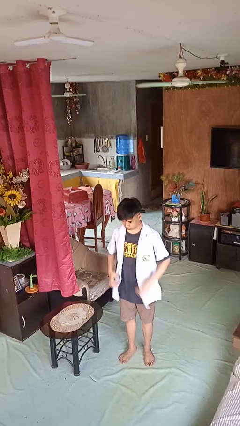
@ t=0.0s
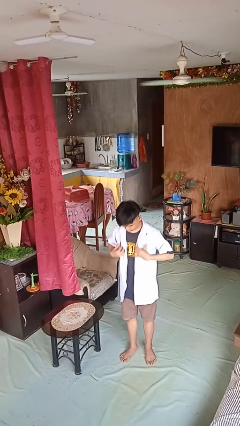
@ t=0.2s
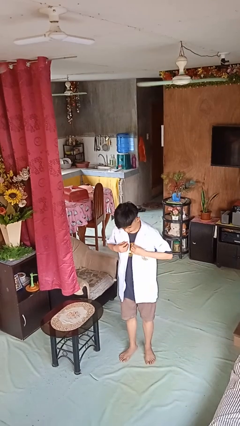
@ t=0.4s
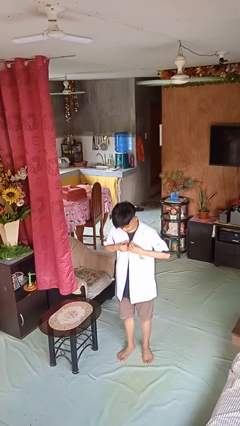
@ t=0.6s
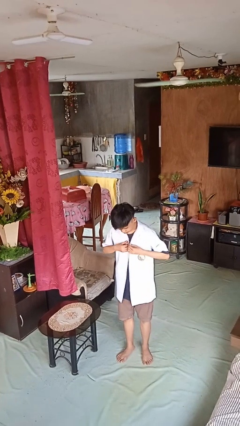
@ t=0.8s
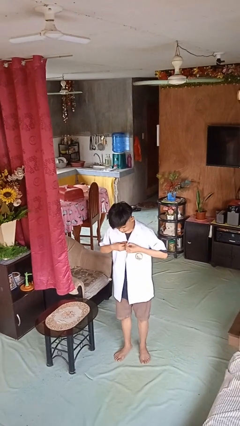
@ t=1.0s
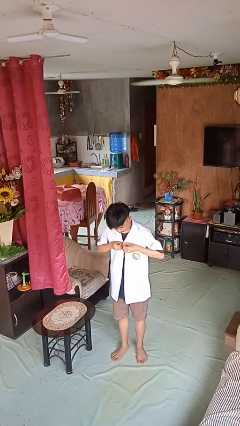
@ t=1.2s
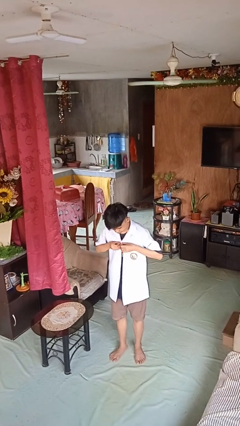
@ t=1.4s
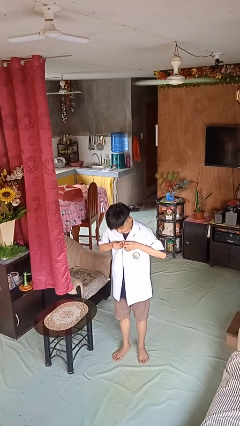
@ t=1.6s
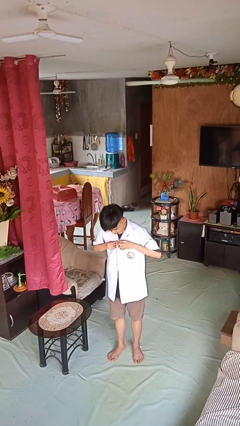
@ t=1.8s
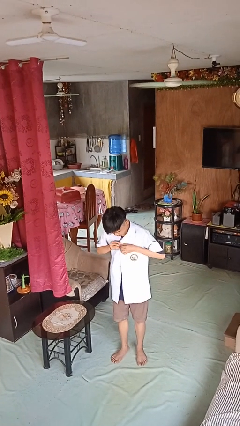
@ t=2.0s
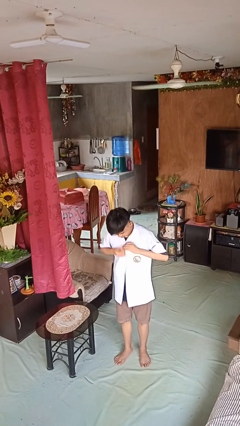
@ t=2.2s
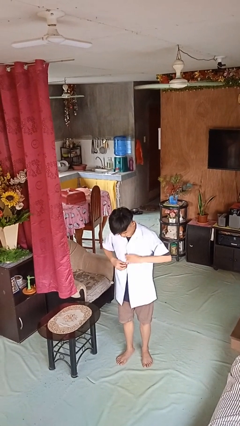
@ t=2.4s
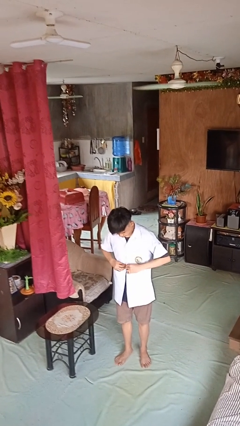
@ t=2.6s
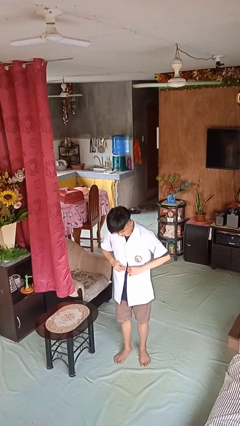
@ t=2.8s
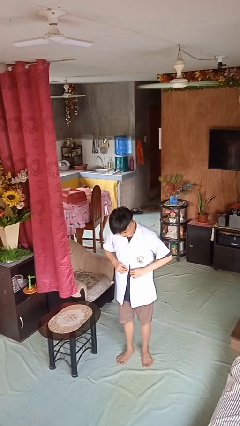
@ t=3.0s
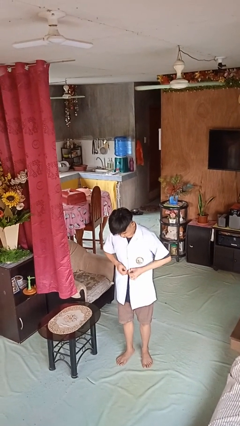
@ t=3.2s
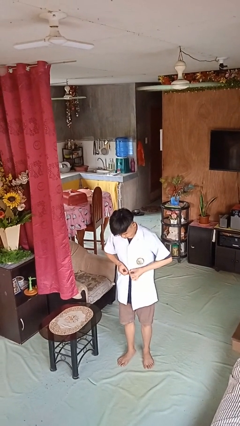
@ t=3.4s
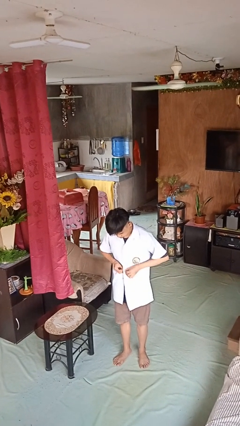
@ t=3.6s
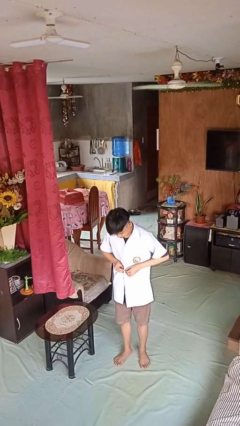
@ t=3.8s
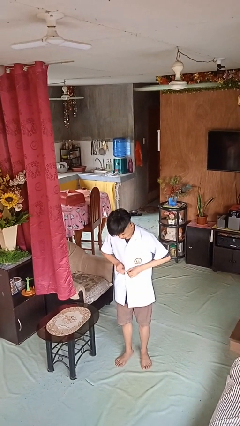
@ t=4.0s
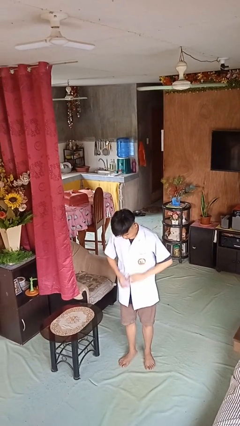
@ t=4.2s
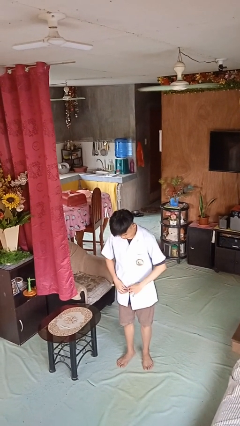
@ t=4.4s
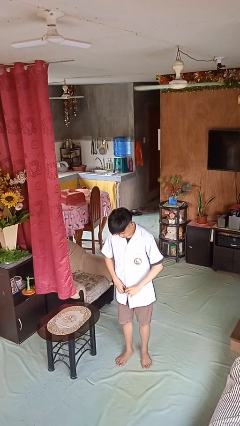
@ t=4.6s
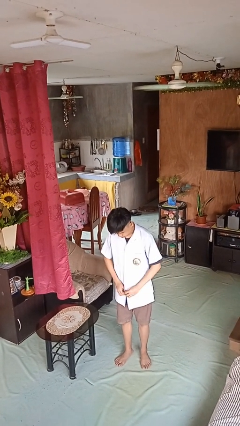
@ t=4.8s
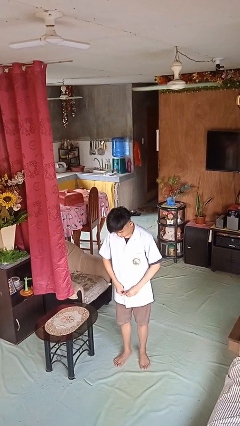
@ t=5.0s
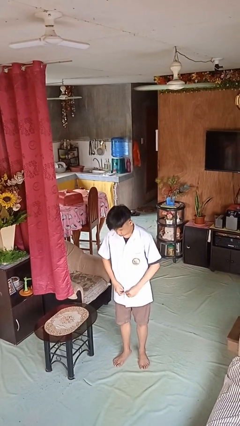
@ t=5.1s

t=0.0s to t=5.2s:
person buttons shirt

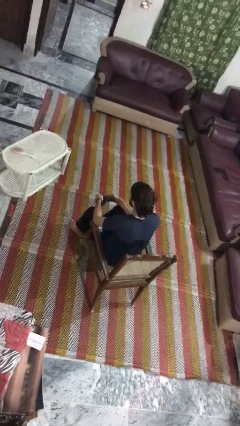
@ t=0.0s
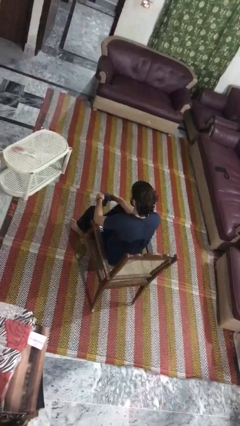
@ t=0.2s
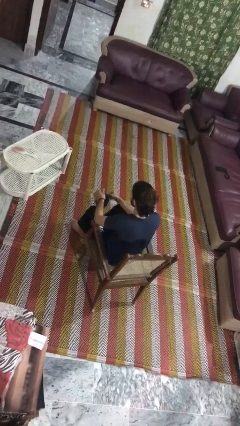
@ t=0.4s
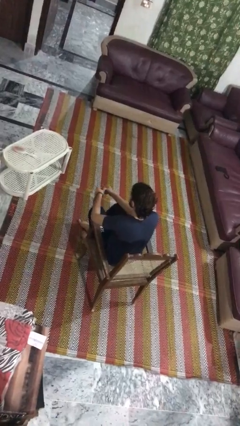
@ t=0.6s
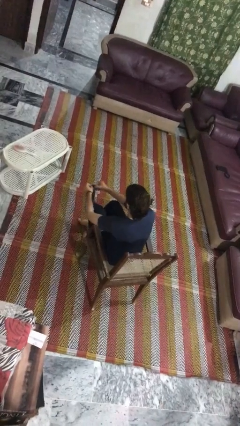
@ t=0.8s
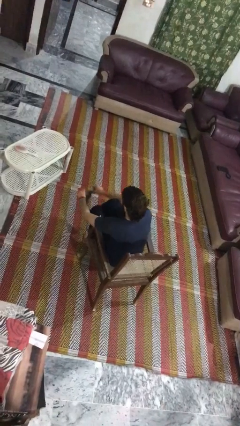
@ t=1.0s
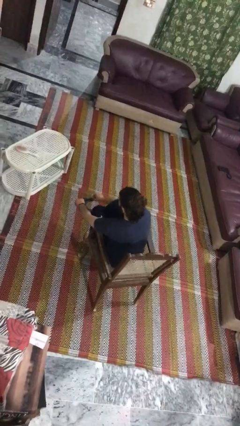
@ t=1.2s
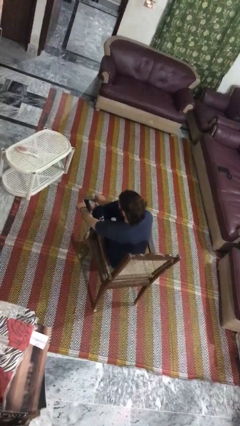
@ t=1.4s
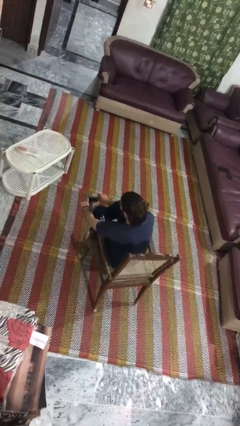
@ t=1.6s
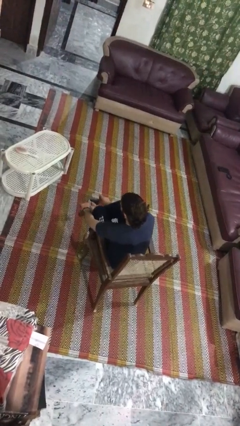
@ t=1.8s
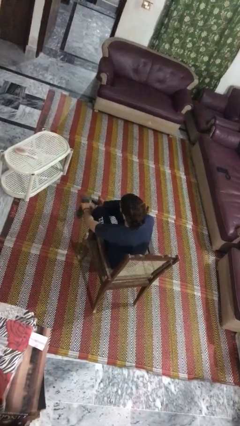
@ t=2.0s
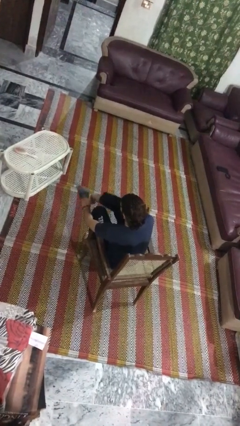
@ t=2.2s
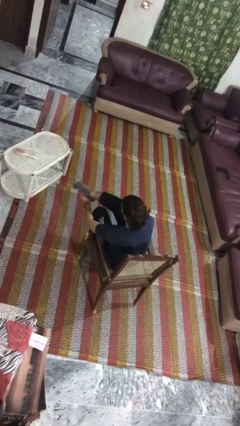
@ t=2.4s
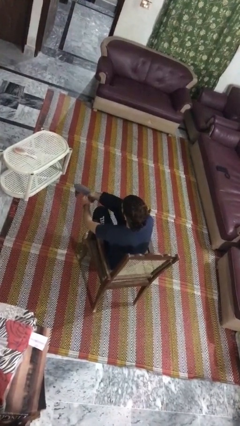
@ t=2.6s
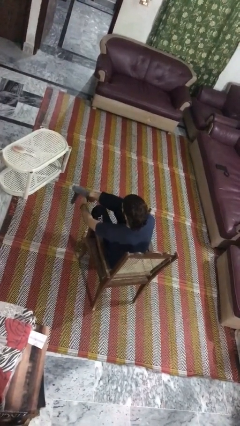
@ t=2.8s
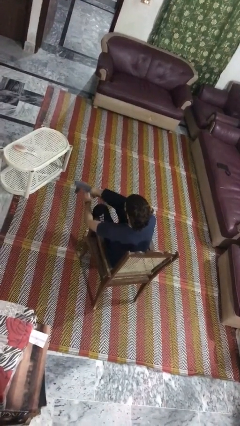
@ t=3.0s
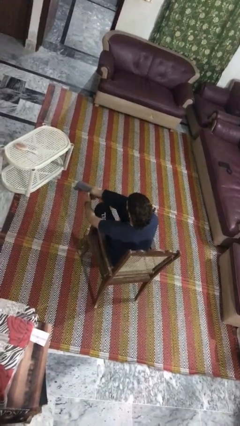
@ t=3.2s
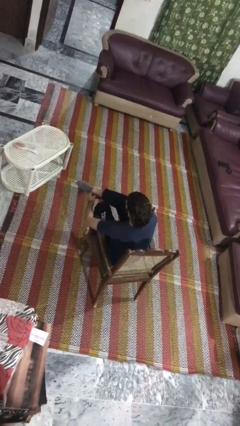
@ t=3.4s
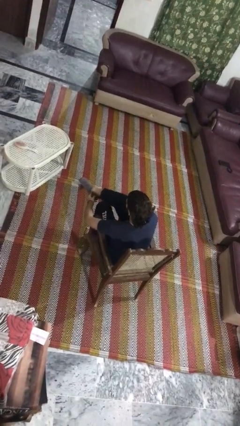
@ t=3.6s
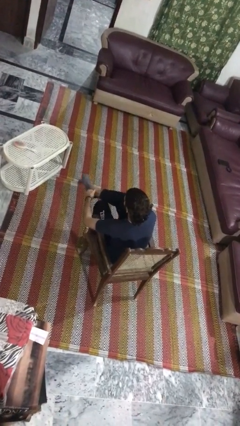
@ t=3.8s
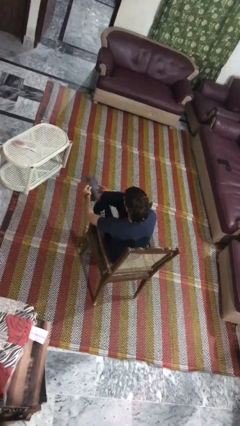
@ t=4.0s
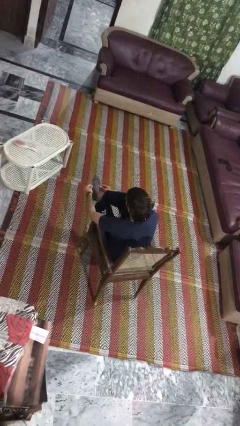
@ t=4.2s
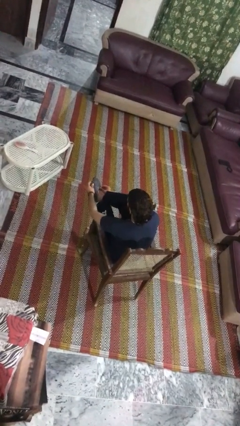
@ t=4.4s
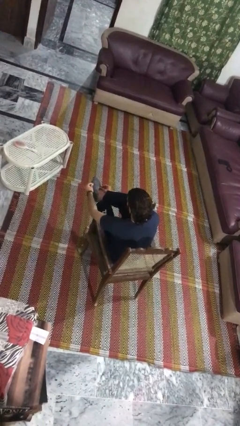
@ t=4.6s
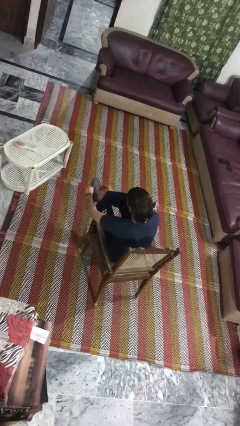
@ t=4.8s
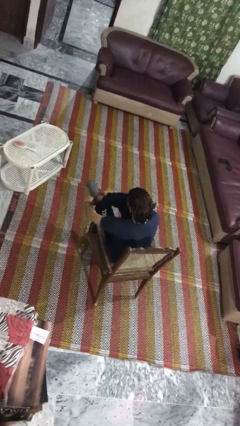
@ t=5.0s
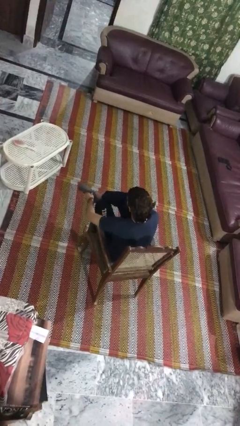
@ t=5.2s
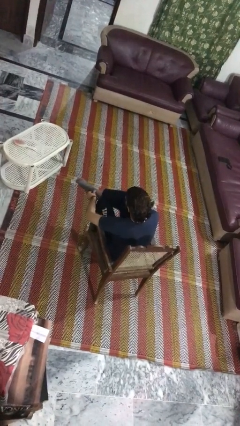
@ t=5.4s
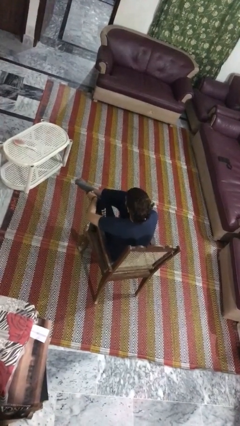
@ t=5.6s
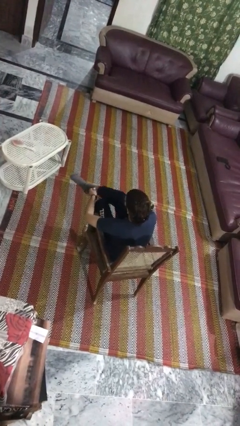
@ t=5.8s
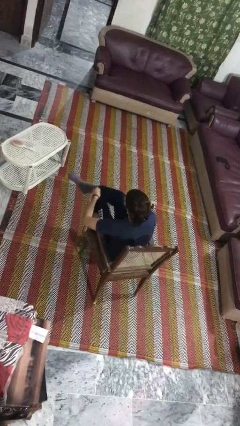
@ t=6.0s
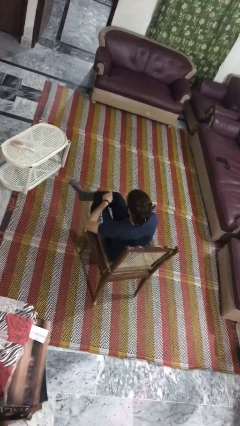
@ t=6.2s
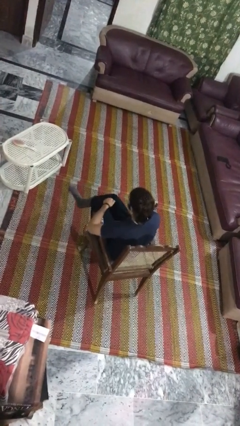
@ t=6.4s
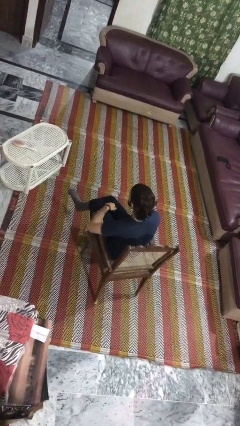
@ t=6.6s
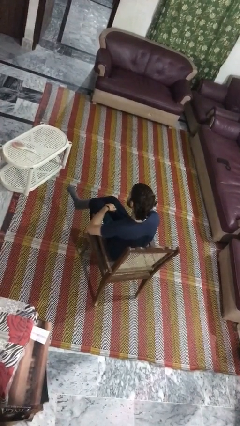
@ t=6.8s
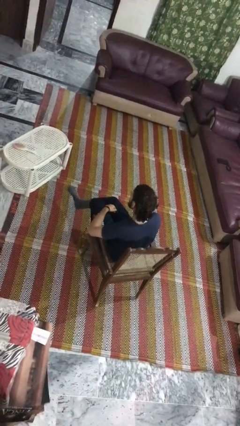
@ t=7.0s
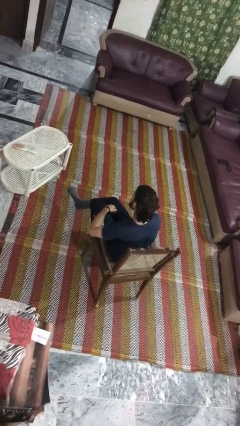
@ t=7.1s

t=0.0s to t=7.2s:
person puts on socks

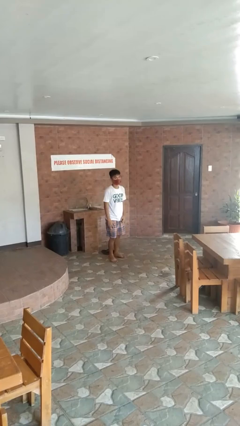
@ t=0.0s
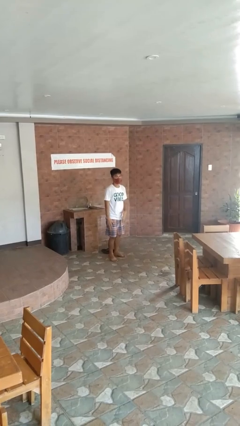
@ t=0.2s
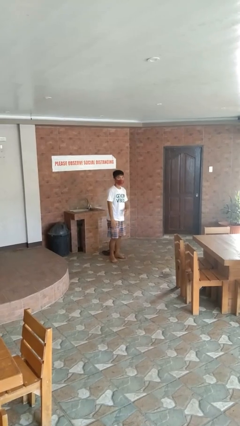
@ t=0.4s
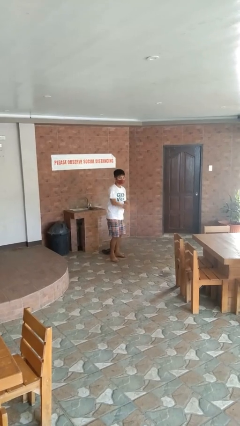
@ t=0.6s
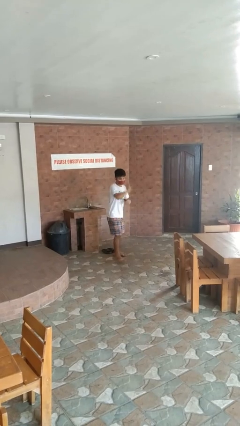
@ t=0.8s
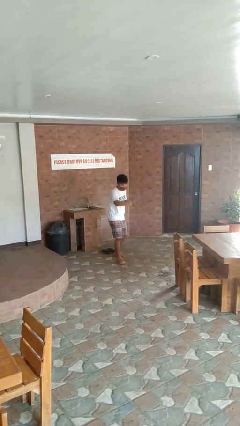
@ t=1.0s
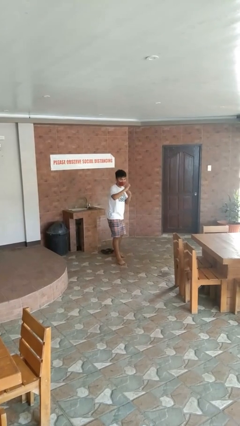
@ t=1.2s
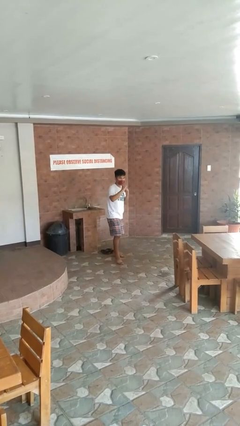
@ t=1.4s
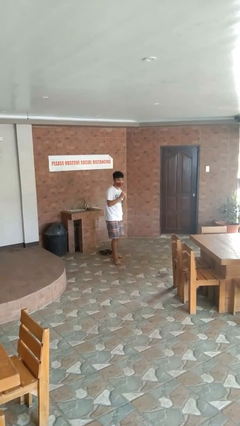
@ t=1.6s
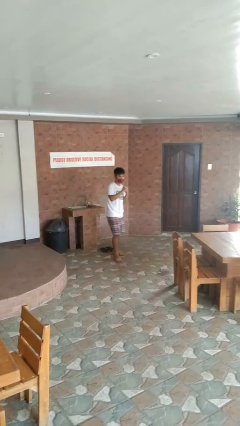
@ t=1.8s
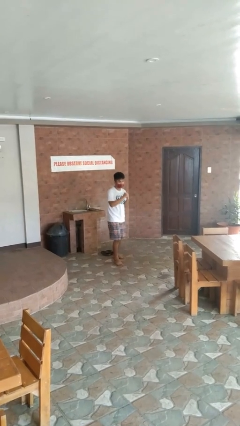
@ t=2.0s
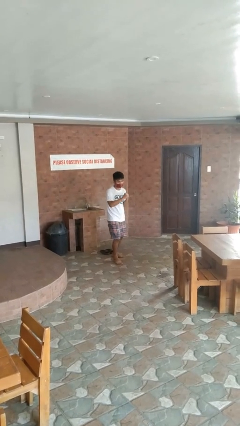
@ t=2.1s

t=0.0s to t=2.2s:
person karate chop

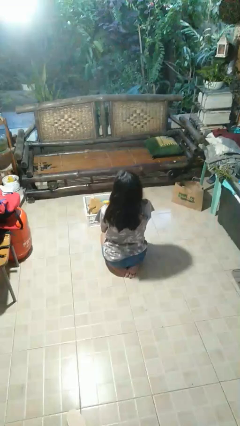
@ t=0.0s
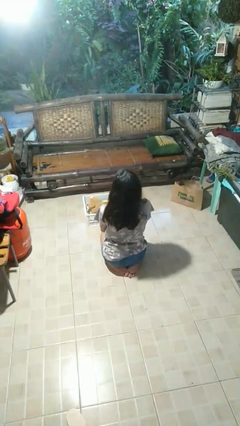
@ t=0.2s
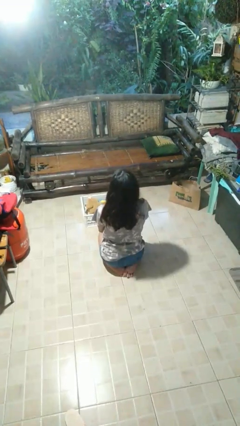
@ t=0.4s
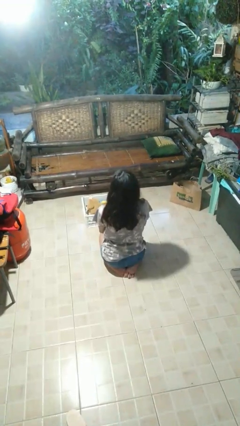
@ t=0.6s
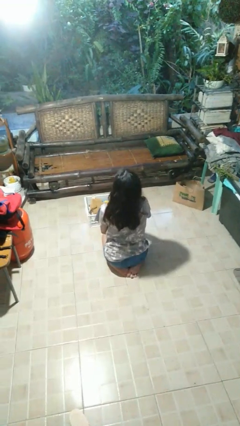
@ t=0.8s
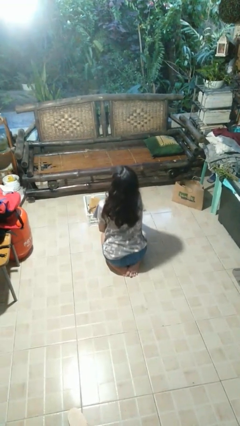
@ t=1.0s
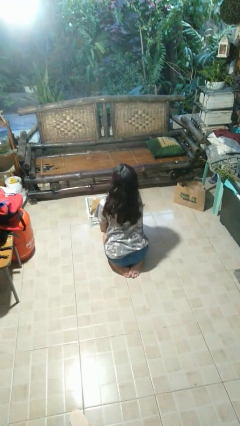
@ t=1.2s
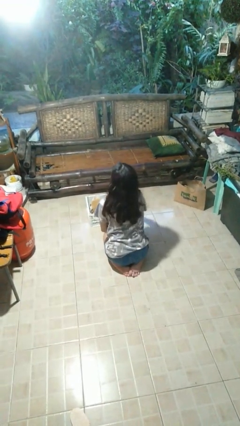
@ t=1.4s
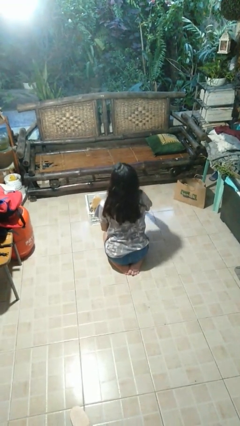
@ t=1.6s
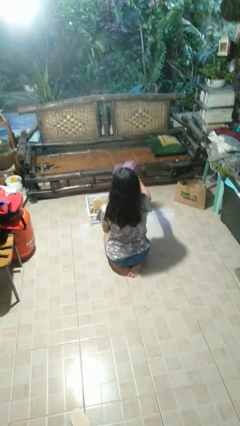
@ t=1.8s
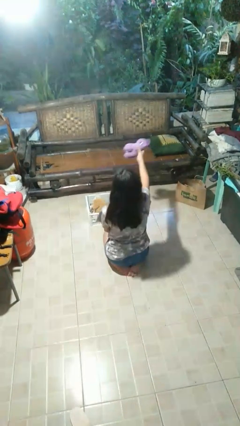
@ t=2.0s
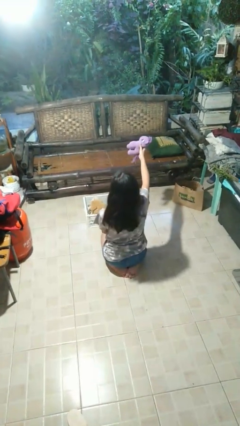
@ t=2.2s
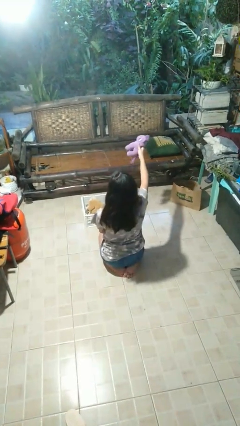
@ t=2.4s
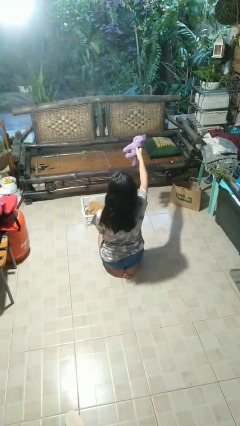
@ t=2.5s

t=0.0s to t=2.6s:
person takes object from basket

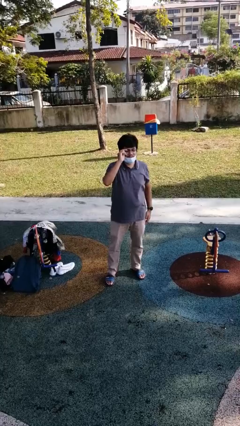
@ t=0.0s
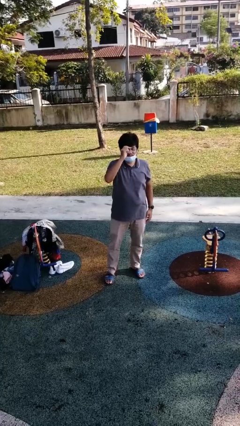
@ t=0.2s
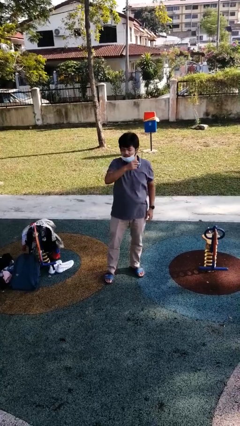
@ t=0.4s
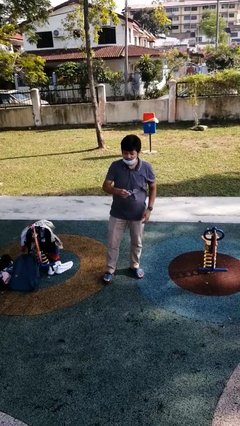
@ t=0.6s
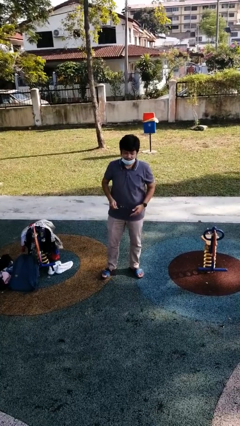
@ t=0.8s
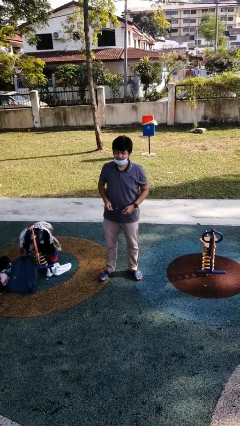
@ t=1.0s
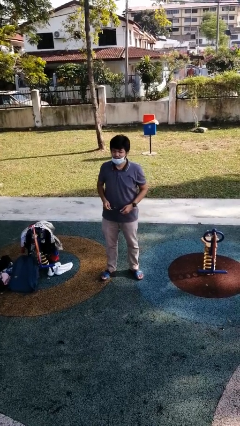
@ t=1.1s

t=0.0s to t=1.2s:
person takes off glasses
